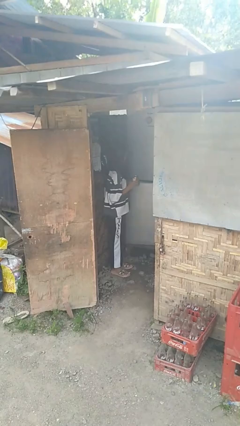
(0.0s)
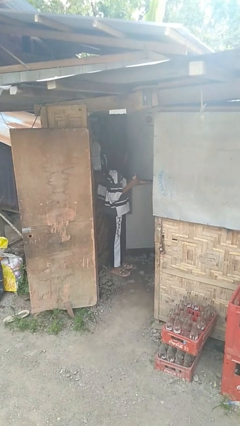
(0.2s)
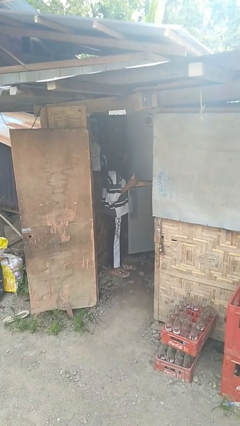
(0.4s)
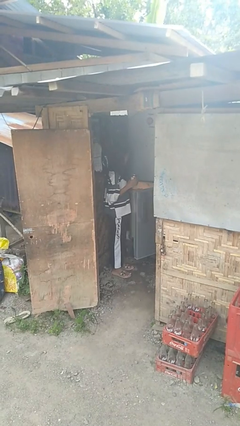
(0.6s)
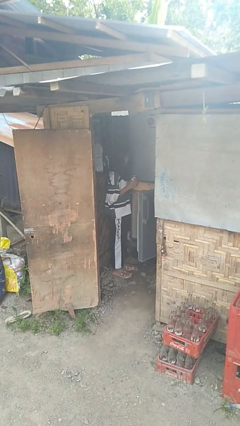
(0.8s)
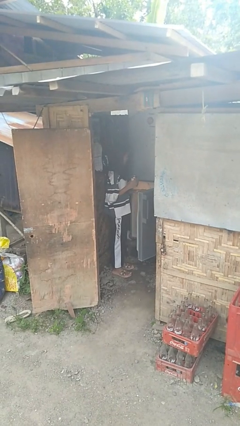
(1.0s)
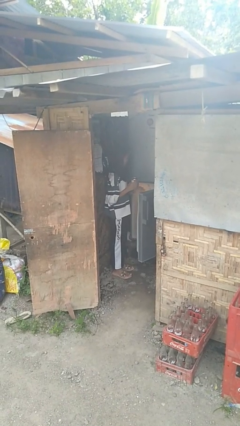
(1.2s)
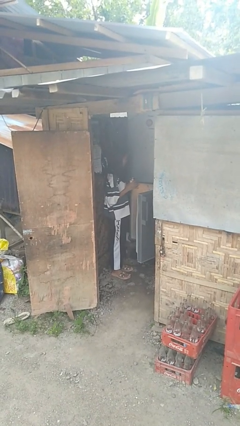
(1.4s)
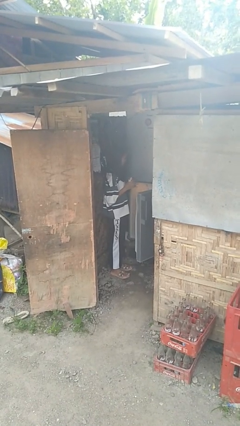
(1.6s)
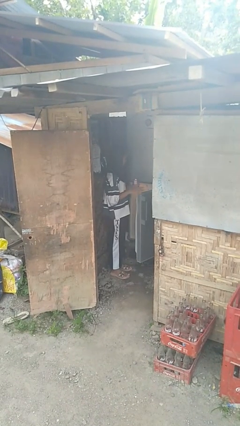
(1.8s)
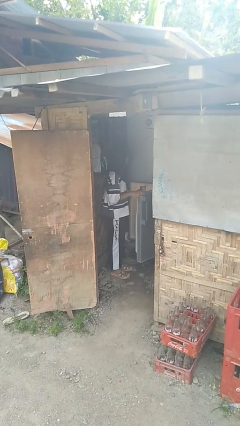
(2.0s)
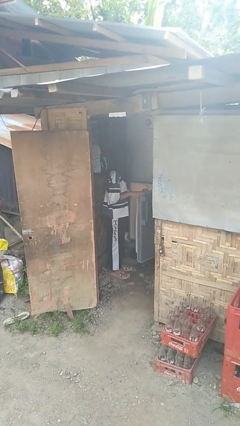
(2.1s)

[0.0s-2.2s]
person opens refrigerator

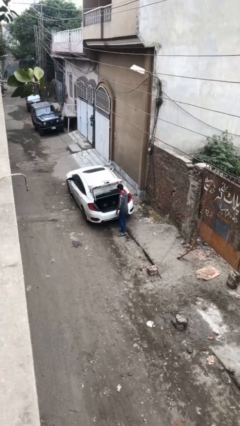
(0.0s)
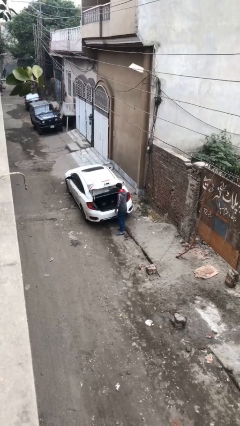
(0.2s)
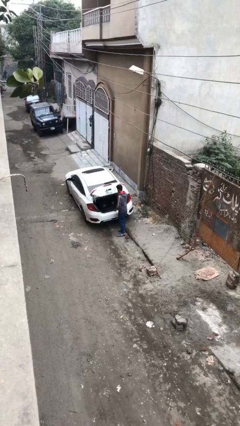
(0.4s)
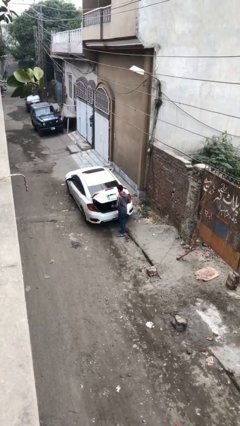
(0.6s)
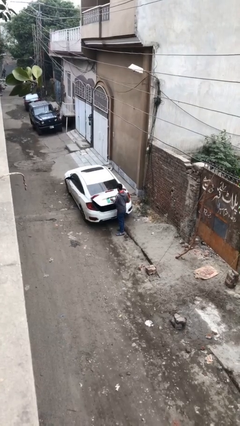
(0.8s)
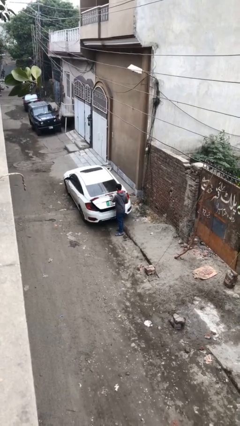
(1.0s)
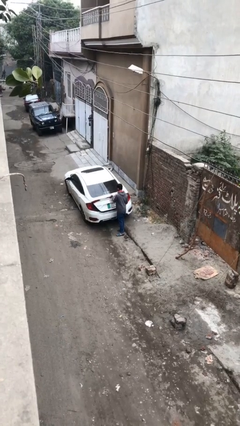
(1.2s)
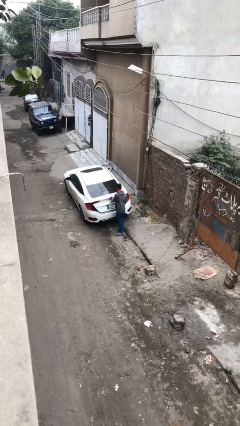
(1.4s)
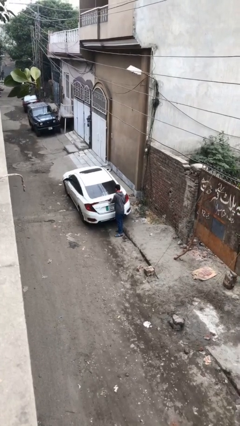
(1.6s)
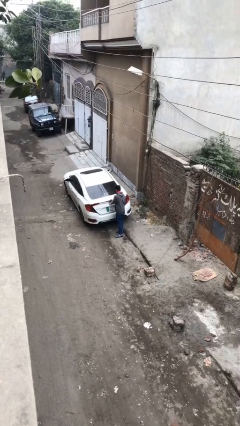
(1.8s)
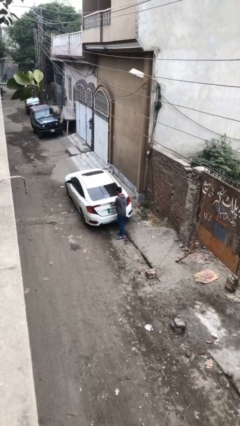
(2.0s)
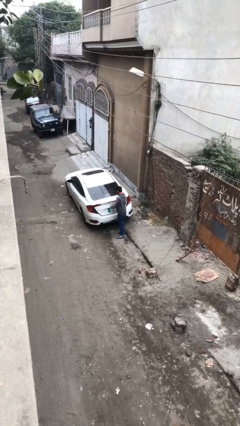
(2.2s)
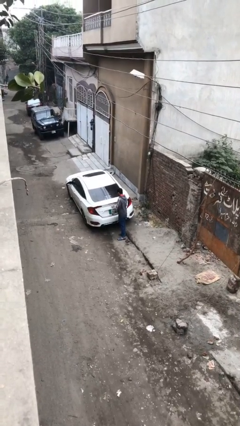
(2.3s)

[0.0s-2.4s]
person closes car trunk

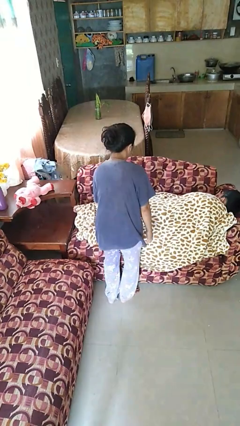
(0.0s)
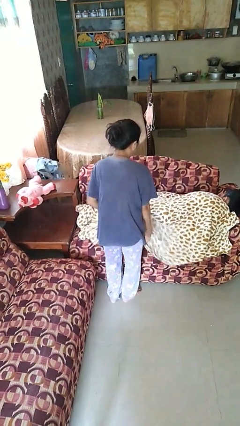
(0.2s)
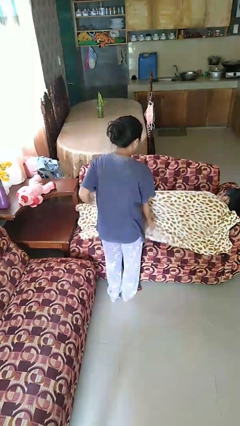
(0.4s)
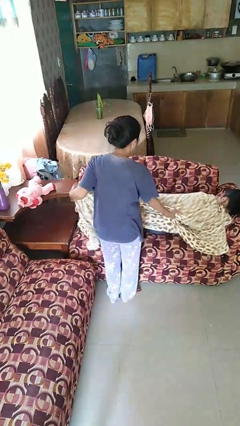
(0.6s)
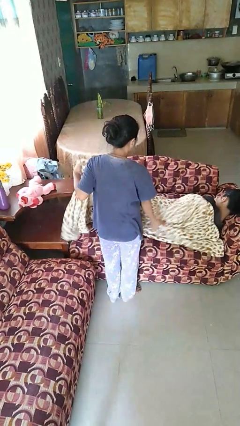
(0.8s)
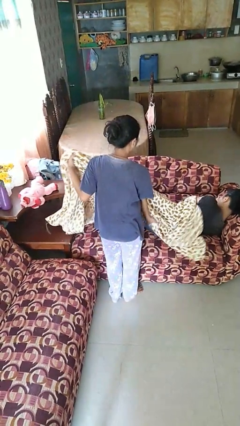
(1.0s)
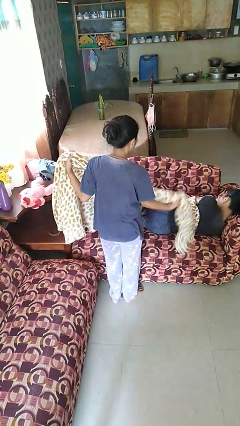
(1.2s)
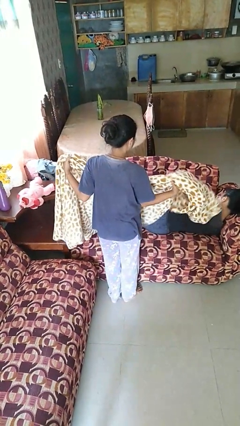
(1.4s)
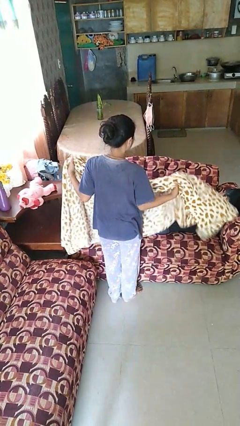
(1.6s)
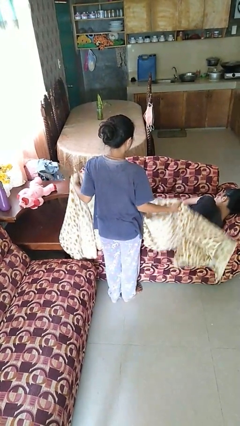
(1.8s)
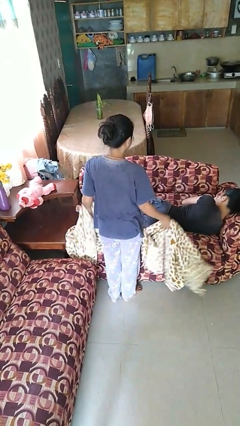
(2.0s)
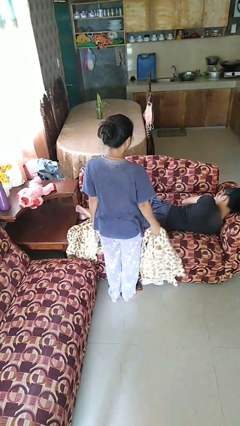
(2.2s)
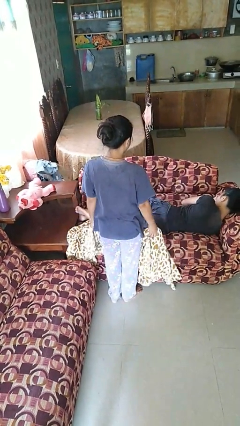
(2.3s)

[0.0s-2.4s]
person uncovers friend with blanket

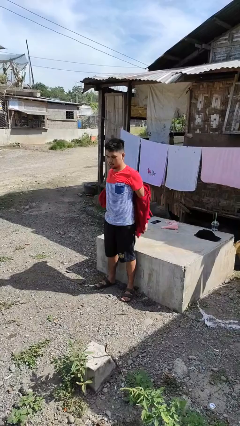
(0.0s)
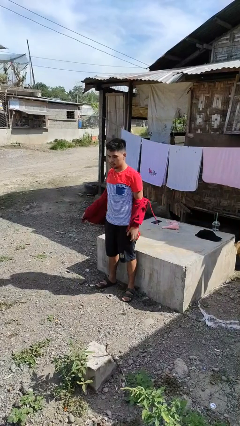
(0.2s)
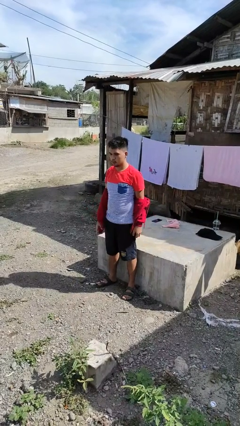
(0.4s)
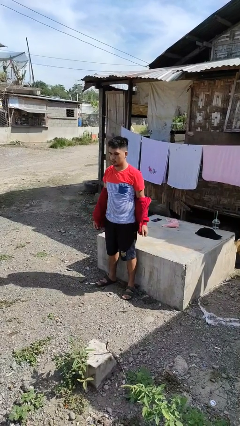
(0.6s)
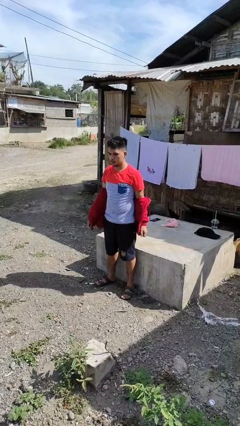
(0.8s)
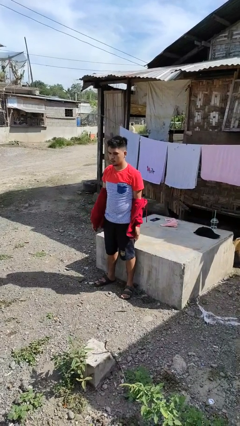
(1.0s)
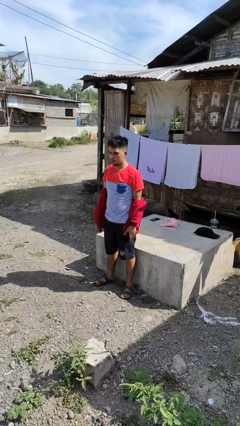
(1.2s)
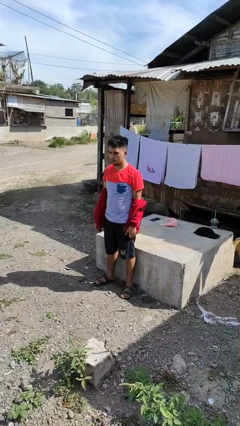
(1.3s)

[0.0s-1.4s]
person takes off jacket

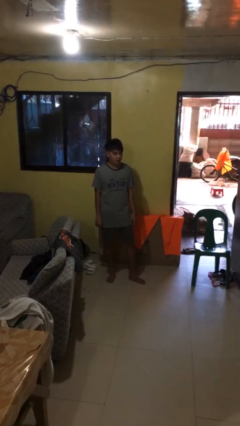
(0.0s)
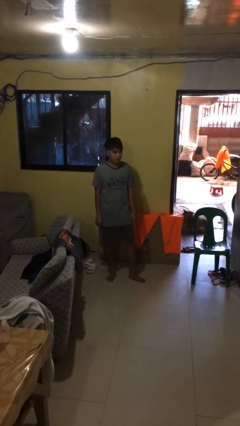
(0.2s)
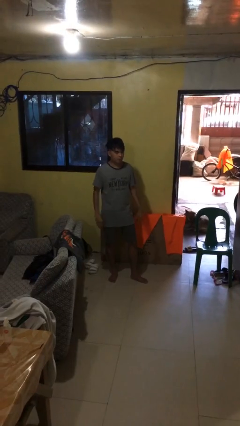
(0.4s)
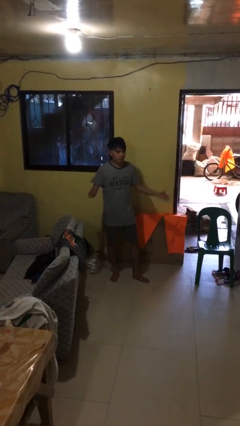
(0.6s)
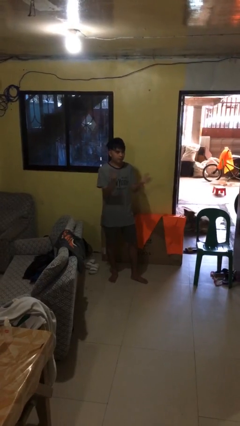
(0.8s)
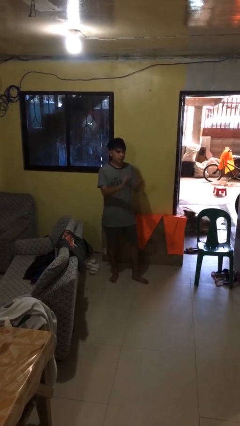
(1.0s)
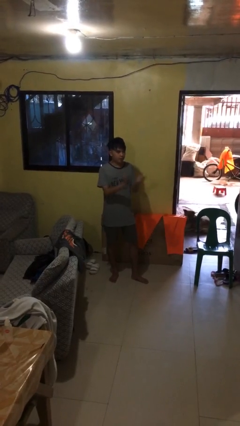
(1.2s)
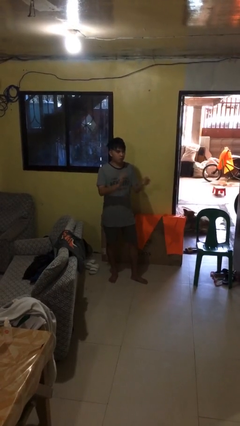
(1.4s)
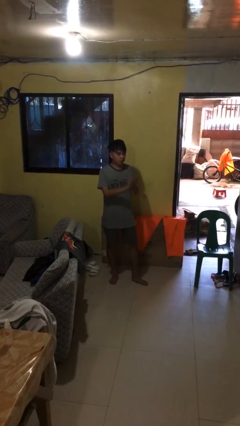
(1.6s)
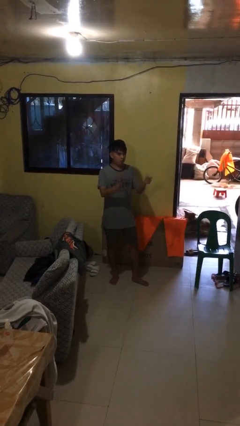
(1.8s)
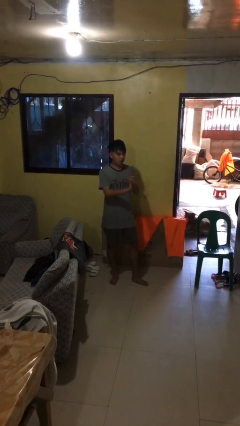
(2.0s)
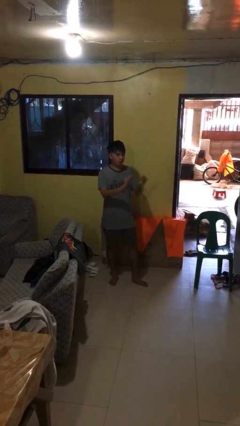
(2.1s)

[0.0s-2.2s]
person claps hands

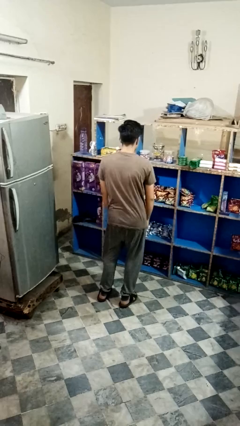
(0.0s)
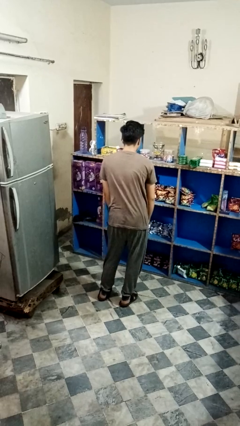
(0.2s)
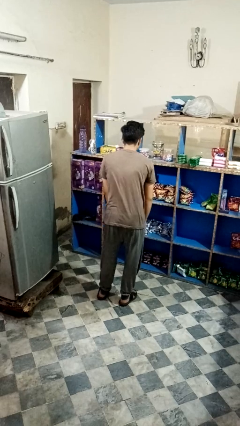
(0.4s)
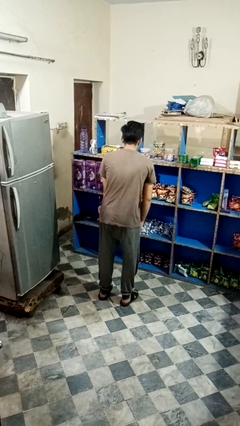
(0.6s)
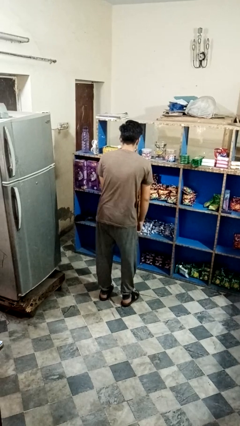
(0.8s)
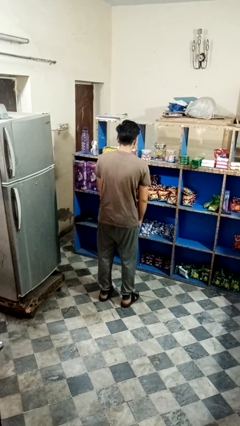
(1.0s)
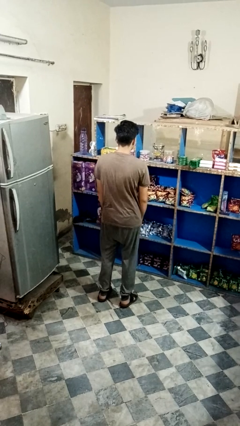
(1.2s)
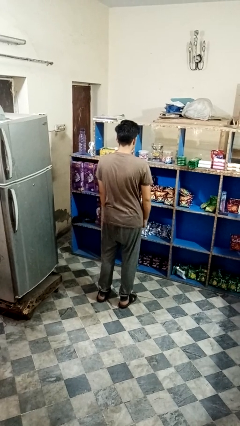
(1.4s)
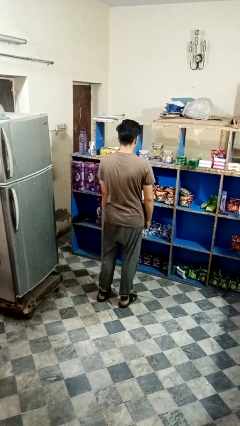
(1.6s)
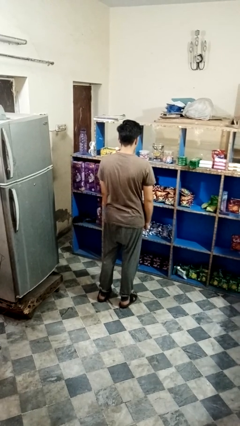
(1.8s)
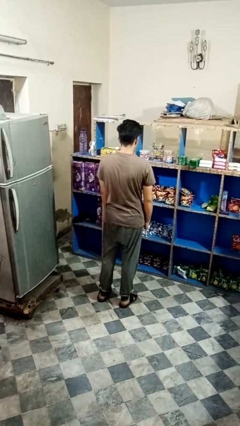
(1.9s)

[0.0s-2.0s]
person wiggles hips

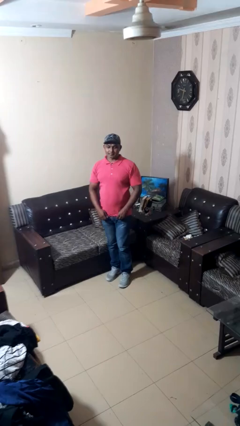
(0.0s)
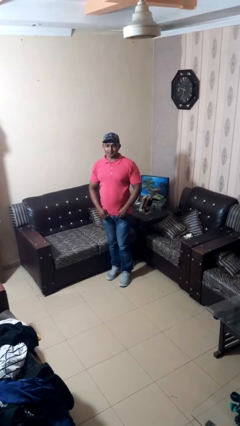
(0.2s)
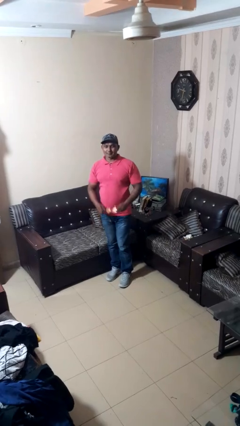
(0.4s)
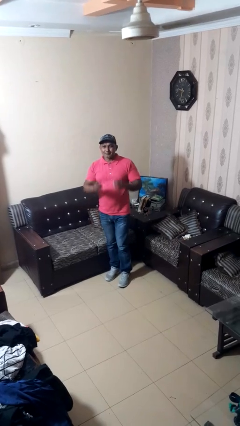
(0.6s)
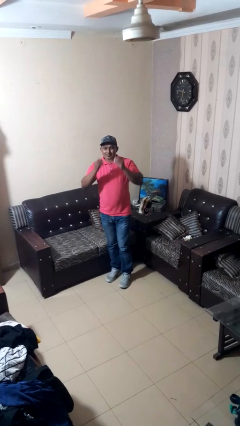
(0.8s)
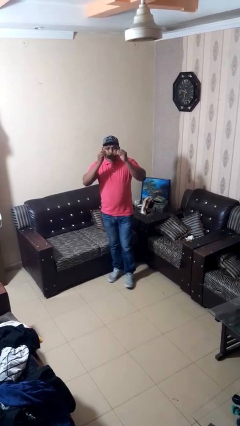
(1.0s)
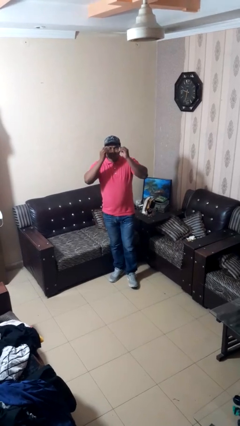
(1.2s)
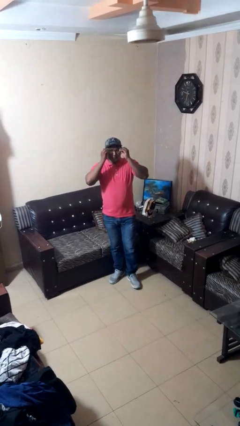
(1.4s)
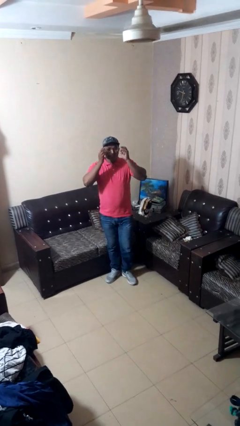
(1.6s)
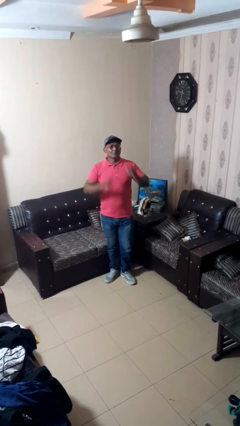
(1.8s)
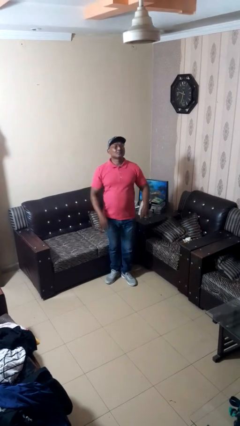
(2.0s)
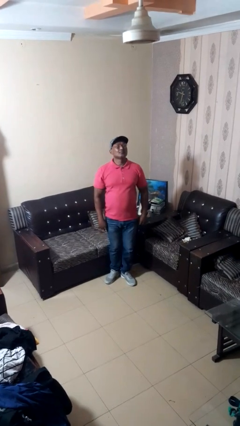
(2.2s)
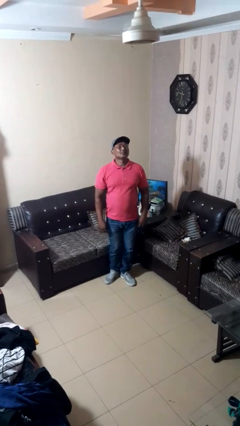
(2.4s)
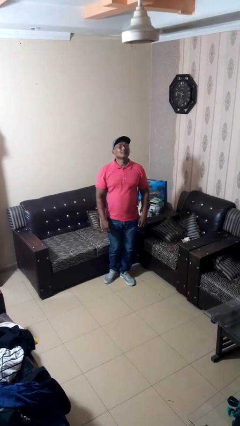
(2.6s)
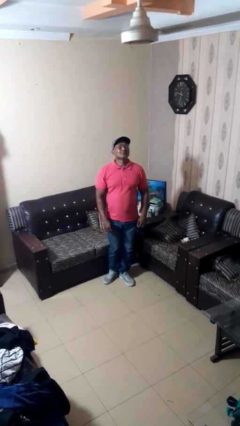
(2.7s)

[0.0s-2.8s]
person puts on glasses

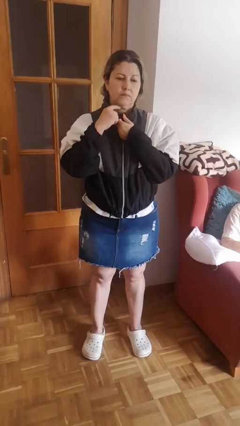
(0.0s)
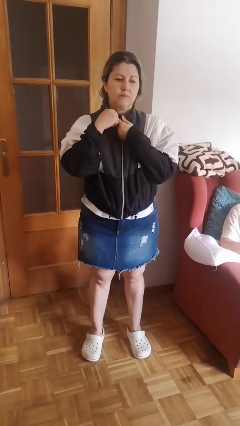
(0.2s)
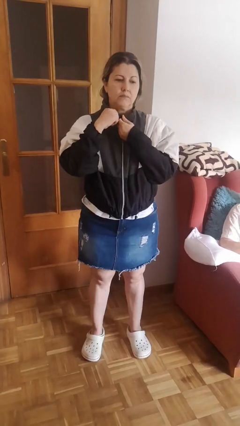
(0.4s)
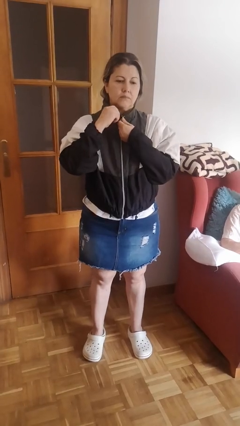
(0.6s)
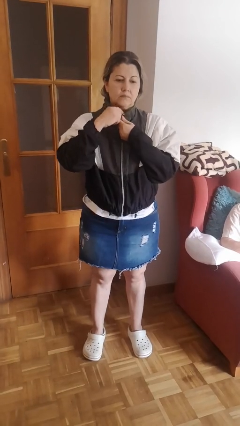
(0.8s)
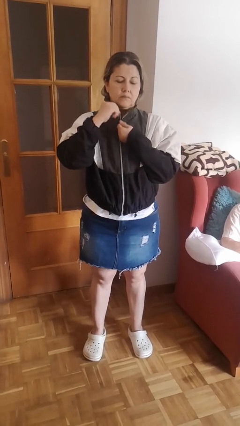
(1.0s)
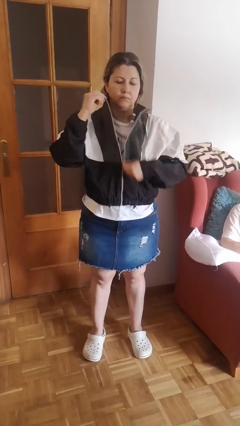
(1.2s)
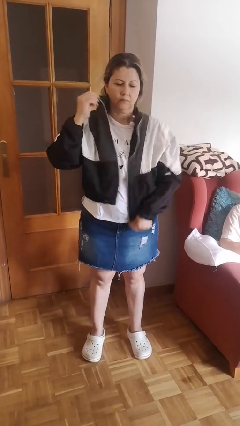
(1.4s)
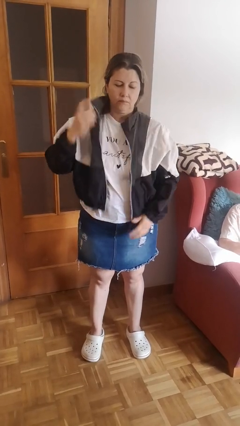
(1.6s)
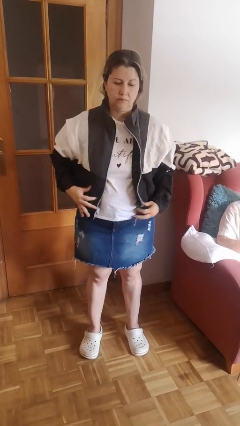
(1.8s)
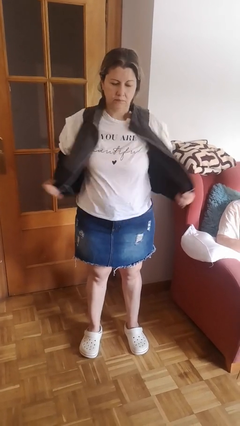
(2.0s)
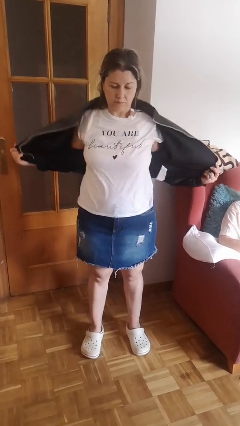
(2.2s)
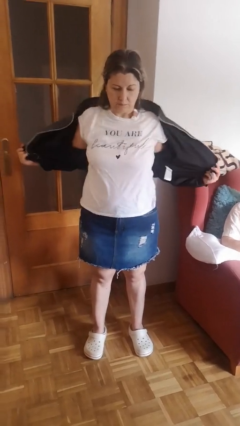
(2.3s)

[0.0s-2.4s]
person unzips jacket
